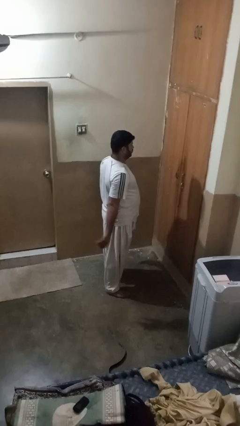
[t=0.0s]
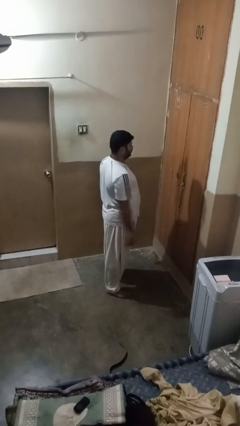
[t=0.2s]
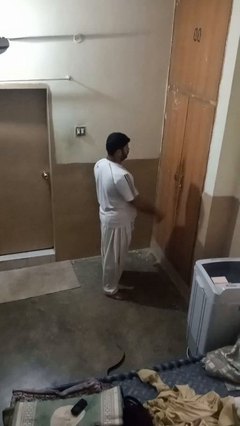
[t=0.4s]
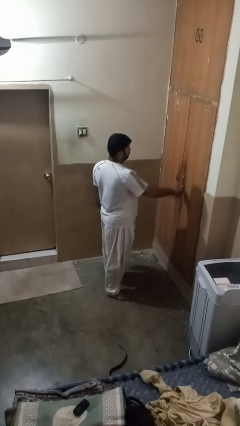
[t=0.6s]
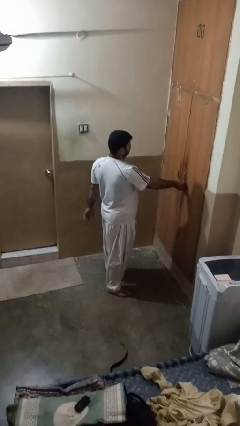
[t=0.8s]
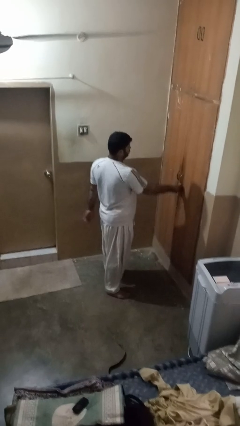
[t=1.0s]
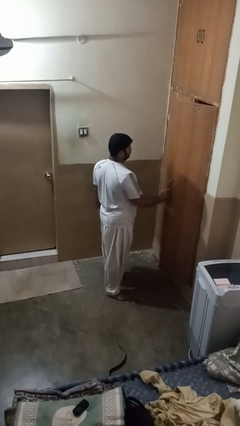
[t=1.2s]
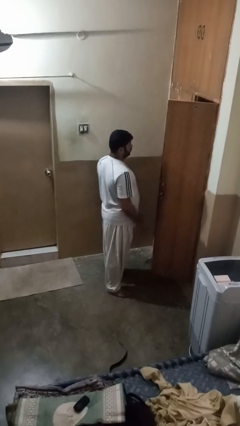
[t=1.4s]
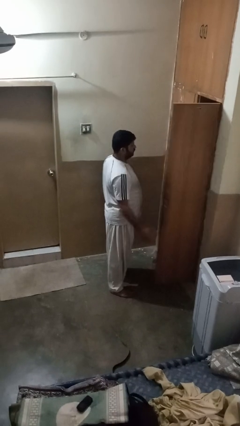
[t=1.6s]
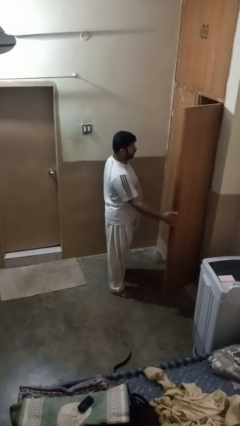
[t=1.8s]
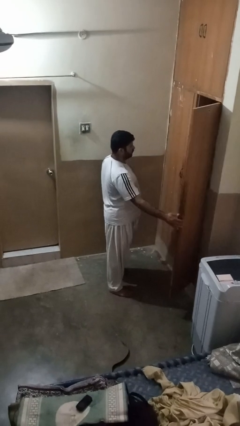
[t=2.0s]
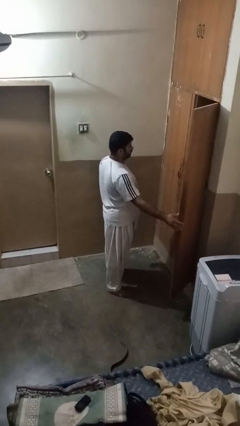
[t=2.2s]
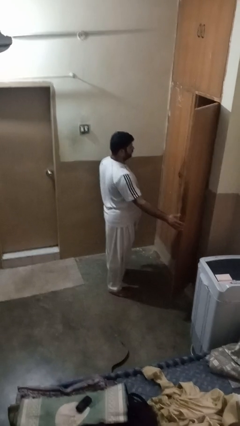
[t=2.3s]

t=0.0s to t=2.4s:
person opens closet door

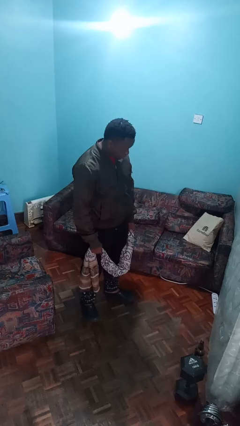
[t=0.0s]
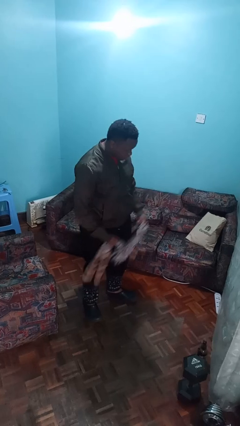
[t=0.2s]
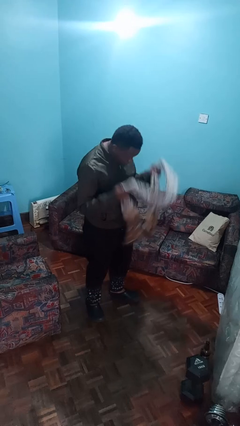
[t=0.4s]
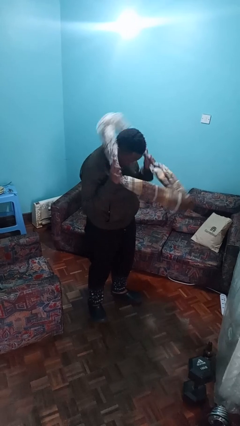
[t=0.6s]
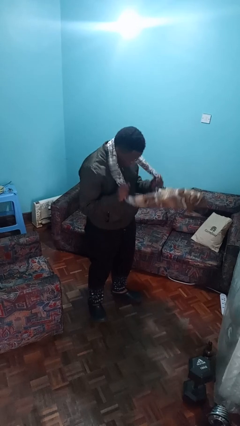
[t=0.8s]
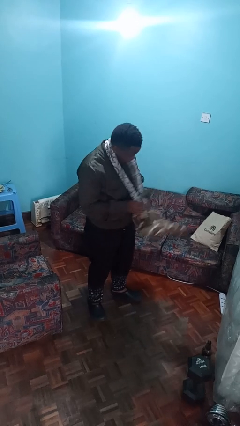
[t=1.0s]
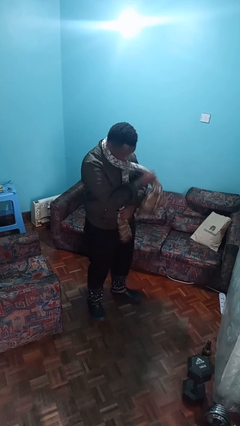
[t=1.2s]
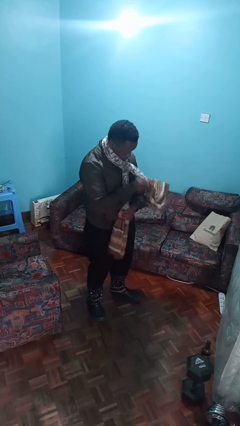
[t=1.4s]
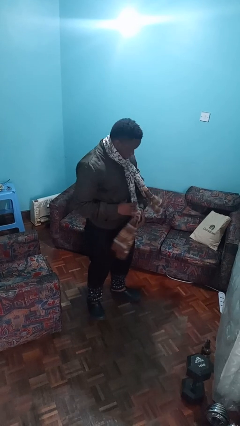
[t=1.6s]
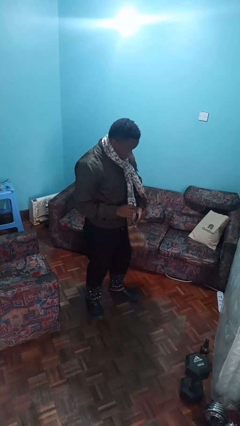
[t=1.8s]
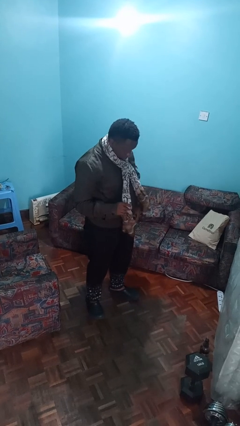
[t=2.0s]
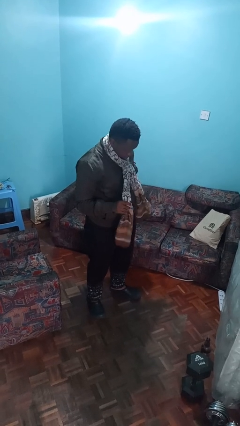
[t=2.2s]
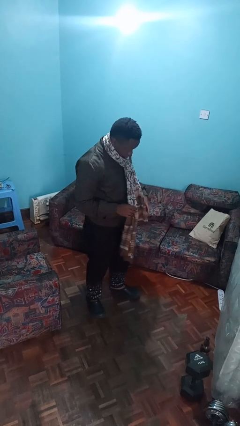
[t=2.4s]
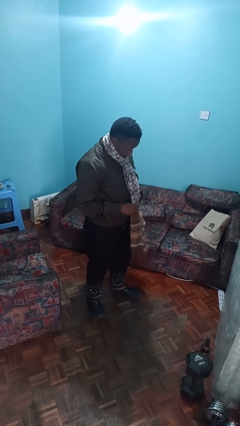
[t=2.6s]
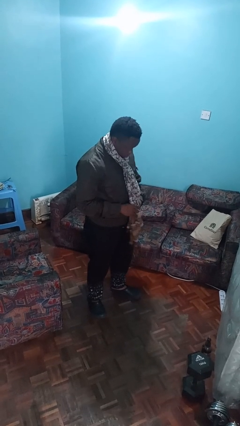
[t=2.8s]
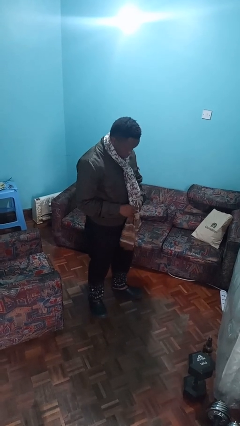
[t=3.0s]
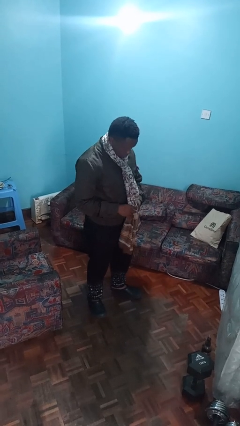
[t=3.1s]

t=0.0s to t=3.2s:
person puts on scarf

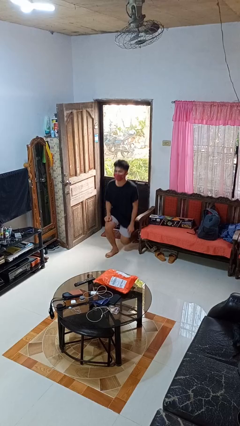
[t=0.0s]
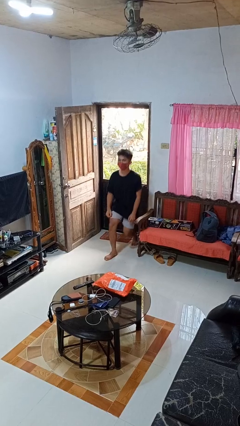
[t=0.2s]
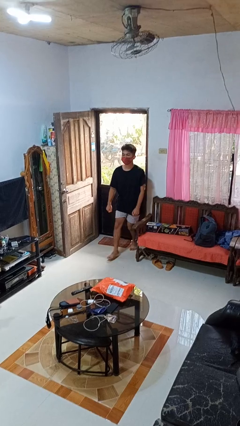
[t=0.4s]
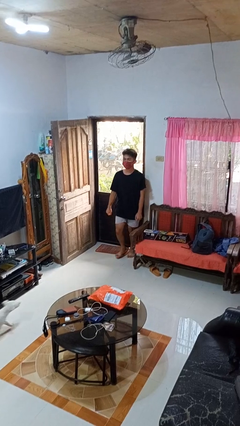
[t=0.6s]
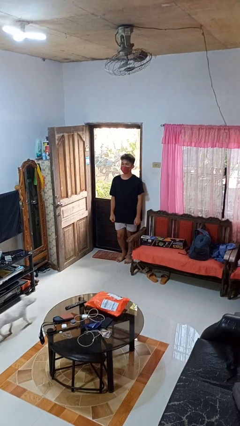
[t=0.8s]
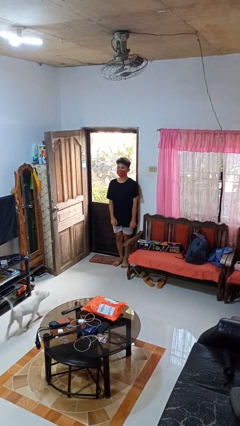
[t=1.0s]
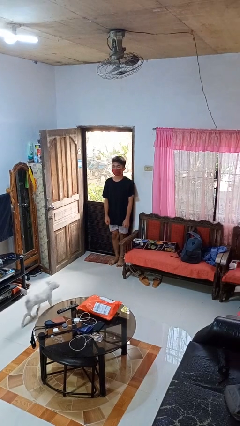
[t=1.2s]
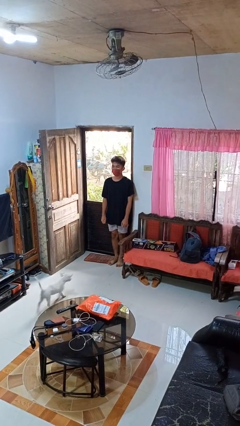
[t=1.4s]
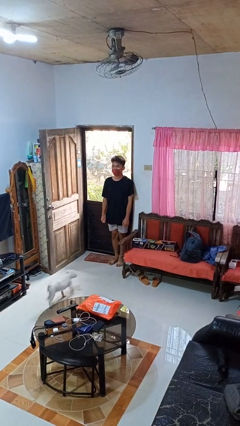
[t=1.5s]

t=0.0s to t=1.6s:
person stands up from floor

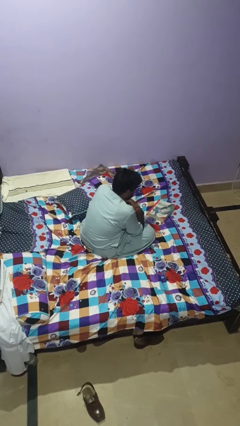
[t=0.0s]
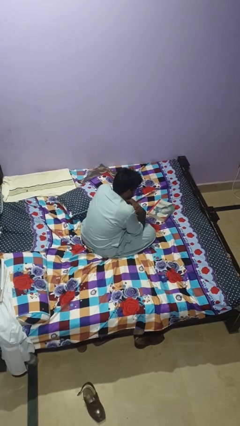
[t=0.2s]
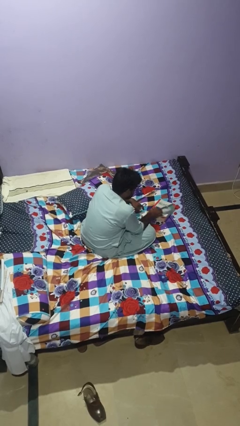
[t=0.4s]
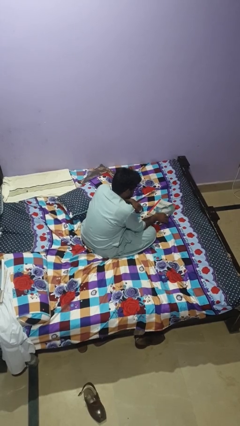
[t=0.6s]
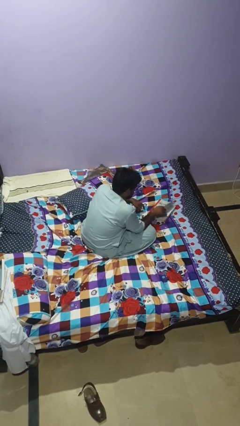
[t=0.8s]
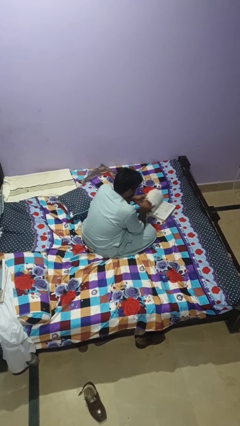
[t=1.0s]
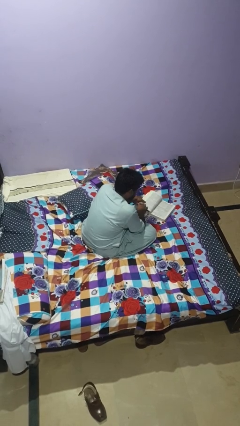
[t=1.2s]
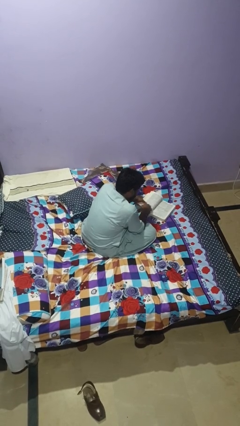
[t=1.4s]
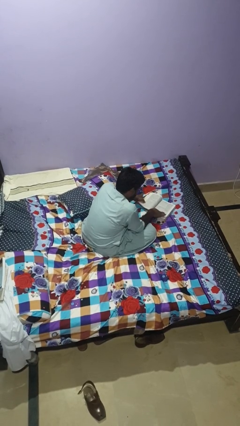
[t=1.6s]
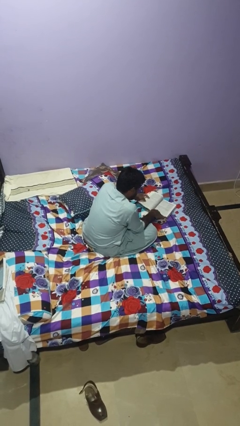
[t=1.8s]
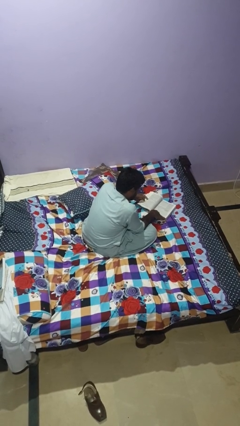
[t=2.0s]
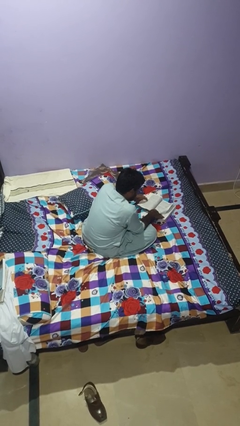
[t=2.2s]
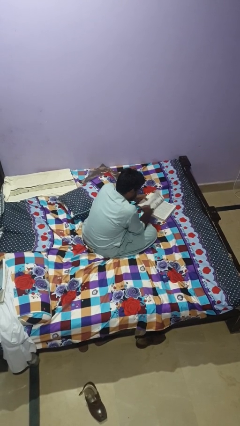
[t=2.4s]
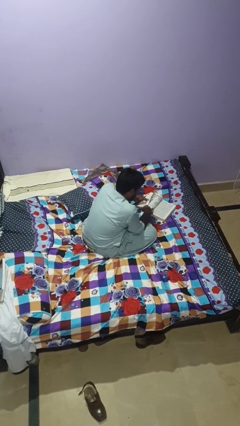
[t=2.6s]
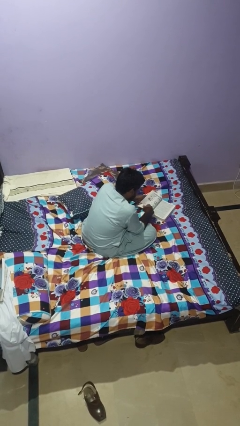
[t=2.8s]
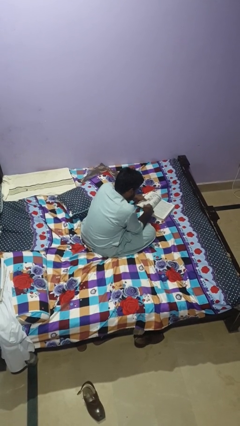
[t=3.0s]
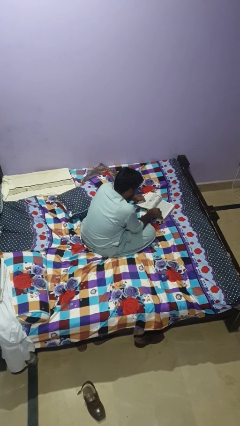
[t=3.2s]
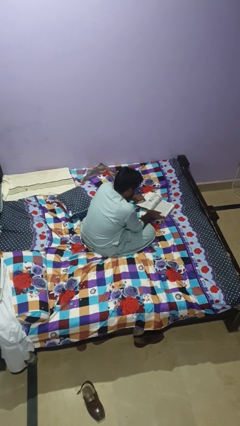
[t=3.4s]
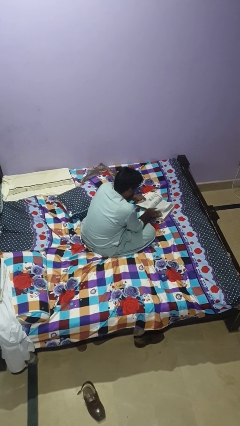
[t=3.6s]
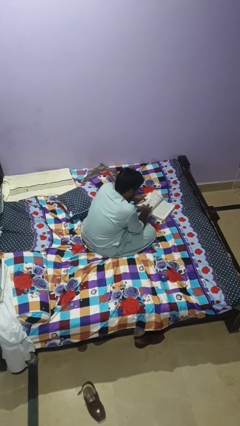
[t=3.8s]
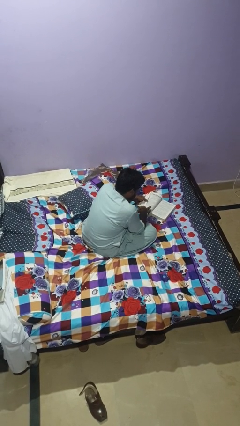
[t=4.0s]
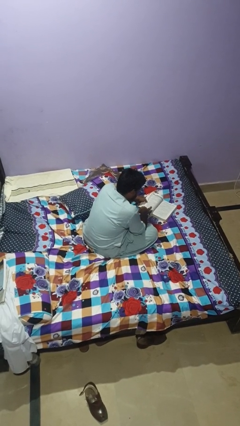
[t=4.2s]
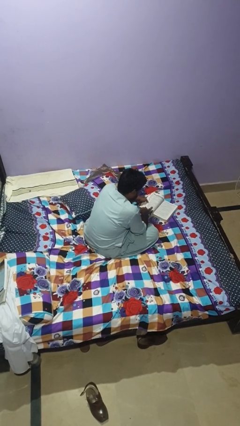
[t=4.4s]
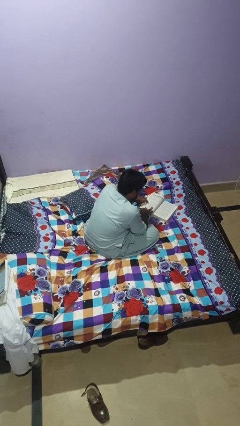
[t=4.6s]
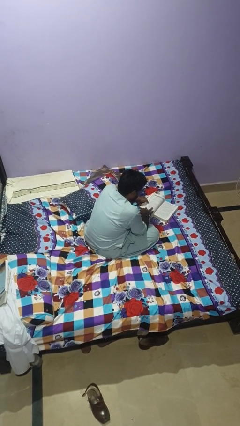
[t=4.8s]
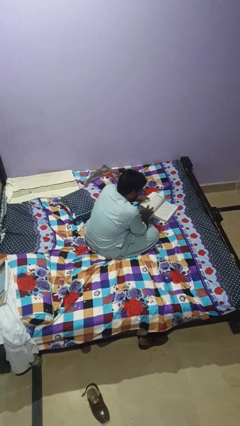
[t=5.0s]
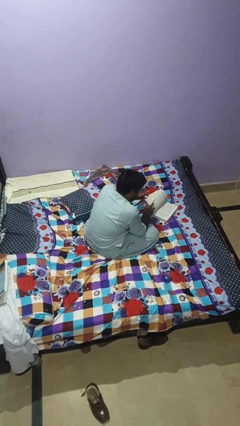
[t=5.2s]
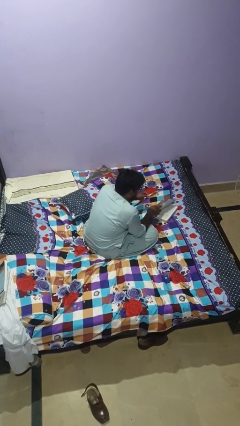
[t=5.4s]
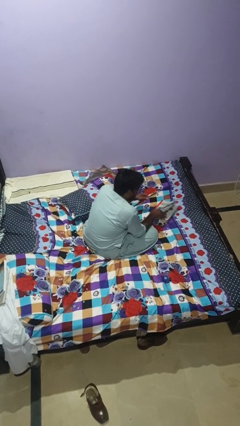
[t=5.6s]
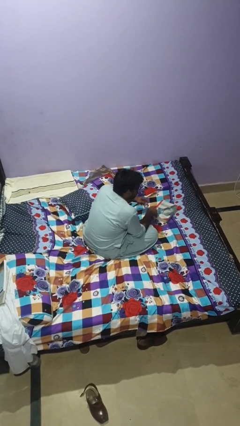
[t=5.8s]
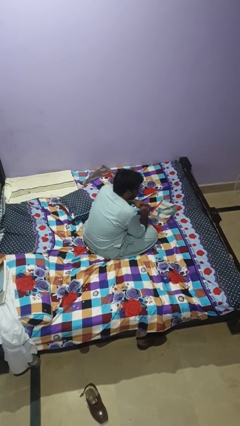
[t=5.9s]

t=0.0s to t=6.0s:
person reads book

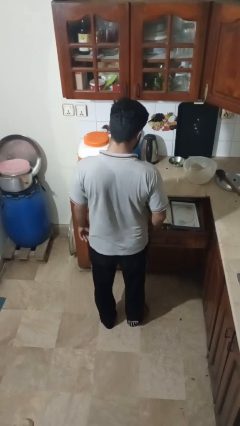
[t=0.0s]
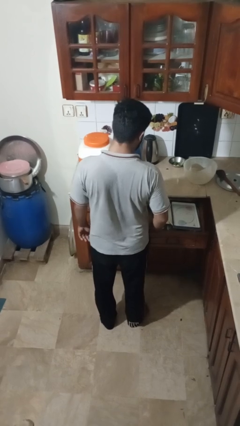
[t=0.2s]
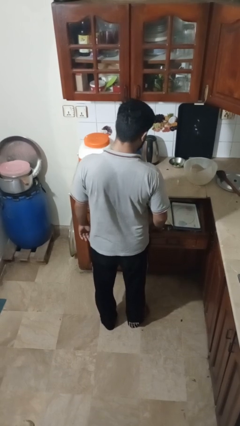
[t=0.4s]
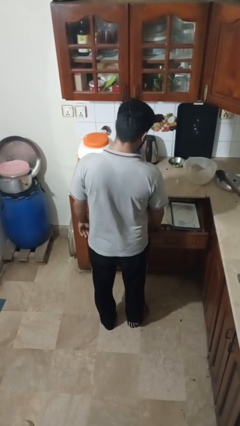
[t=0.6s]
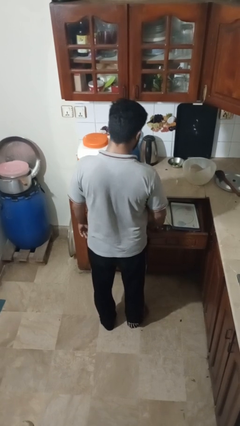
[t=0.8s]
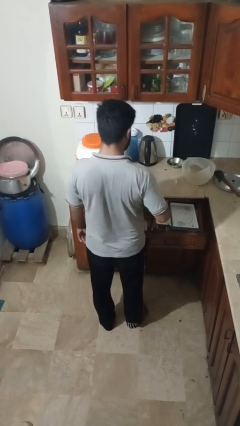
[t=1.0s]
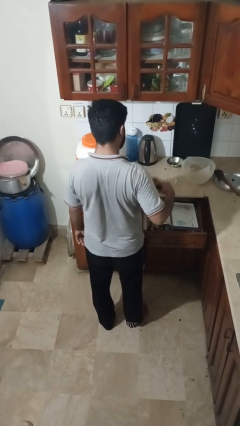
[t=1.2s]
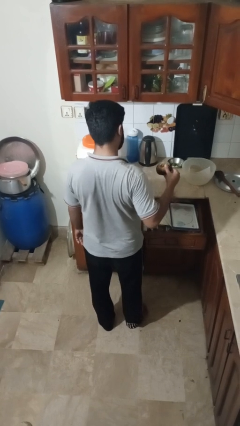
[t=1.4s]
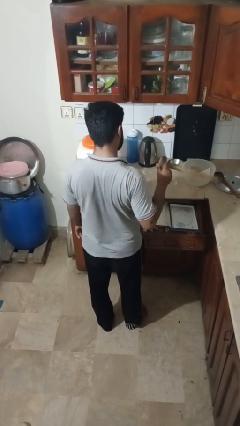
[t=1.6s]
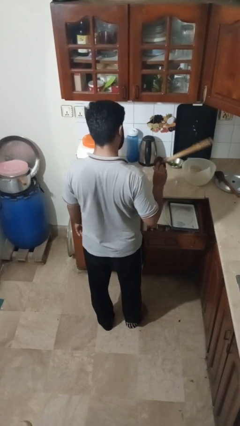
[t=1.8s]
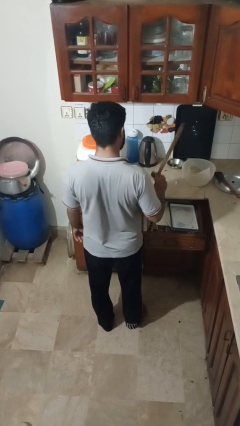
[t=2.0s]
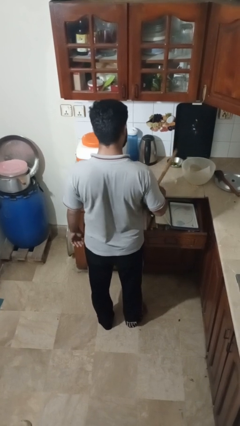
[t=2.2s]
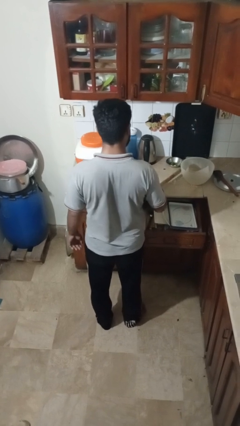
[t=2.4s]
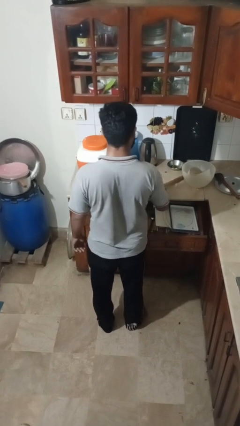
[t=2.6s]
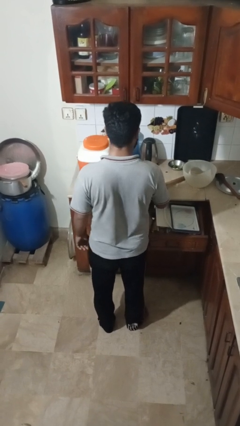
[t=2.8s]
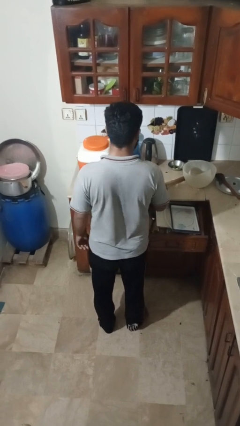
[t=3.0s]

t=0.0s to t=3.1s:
person takes object from kitchen drawer

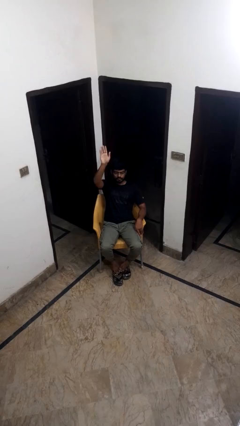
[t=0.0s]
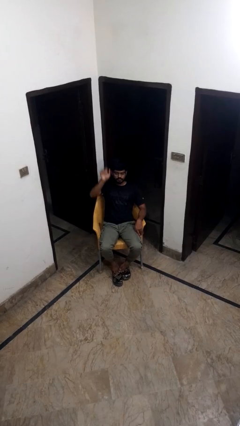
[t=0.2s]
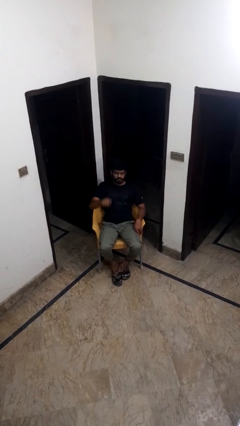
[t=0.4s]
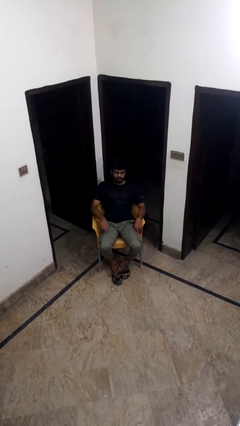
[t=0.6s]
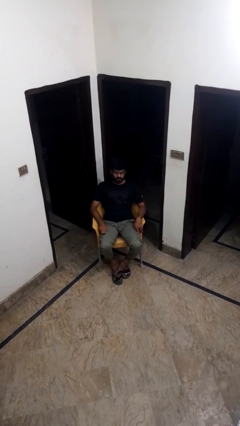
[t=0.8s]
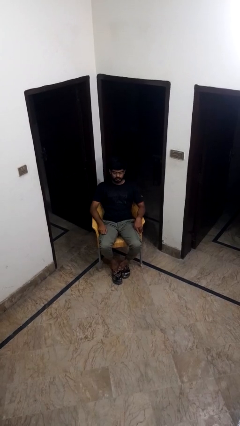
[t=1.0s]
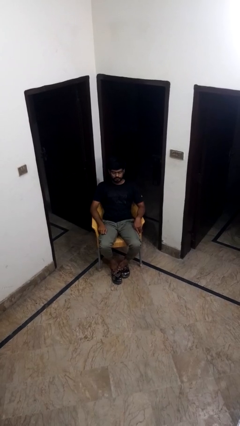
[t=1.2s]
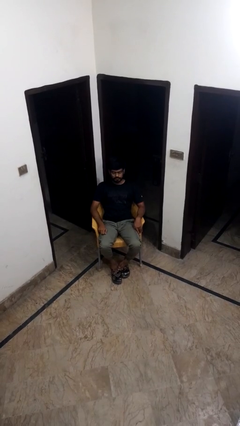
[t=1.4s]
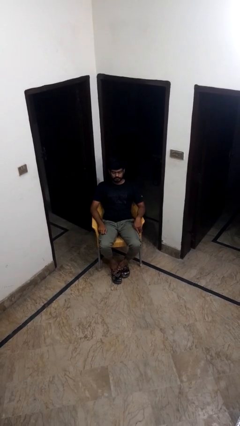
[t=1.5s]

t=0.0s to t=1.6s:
person gestures lower hand
